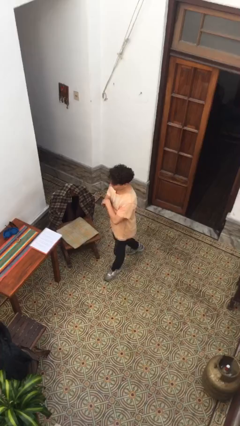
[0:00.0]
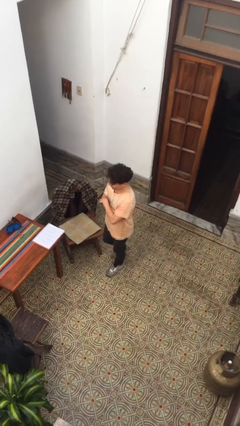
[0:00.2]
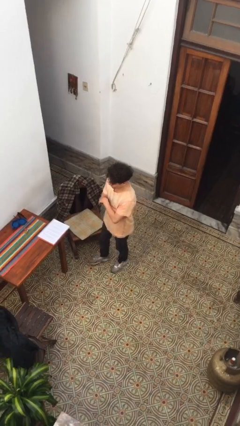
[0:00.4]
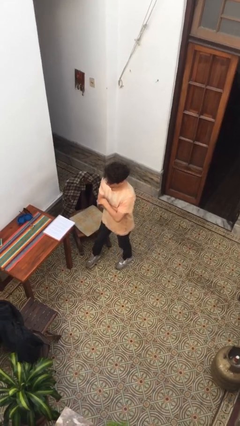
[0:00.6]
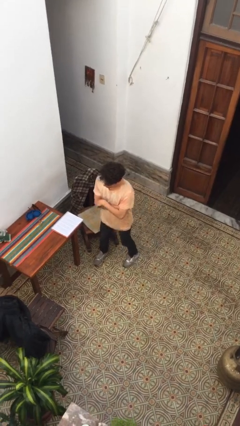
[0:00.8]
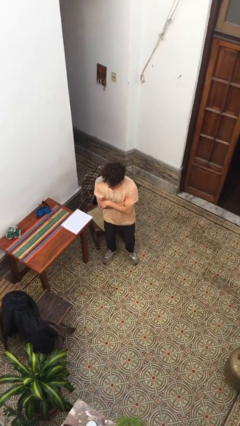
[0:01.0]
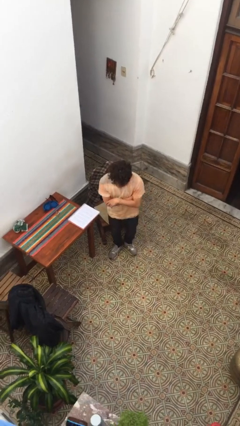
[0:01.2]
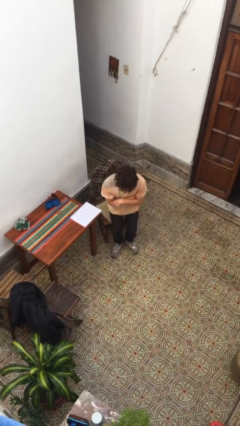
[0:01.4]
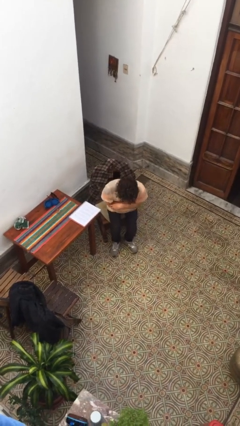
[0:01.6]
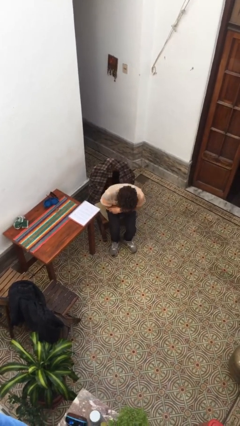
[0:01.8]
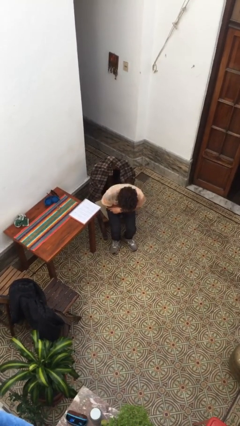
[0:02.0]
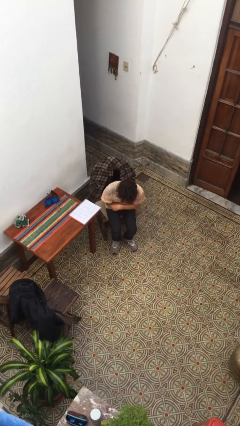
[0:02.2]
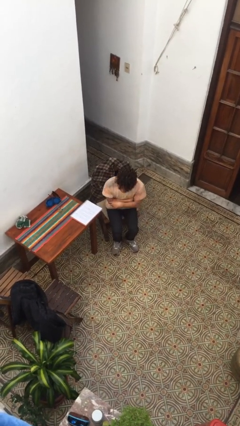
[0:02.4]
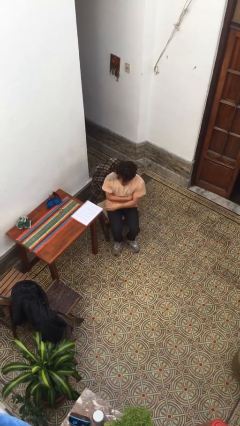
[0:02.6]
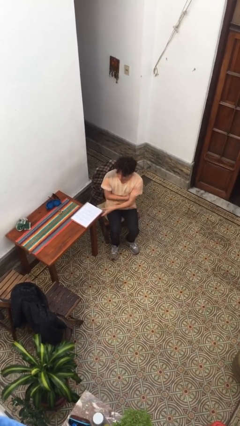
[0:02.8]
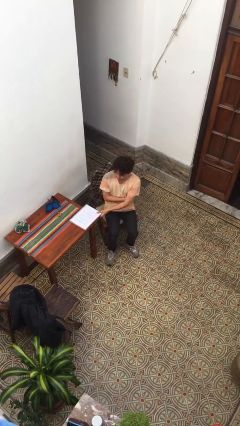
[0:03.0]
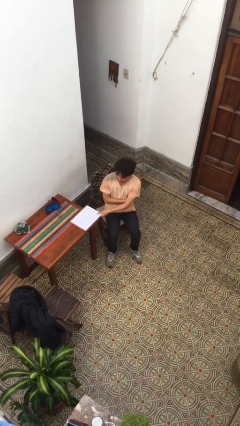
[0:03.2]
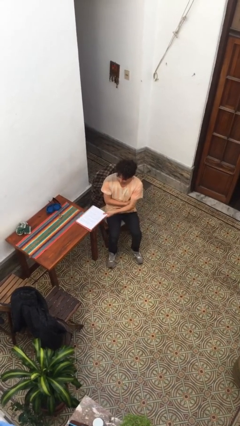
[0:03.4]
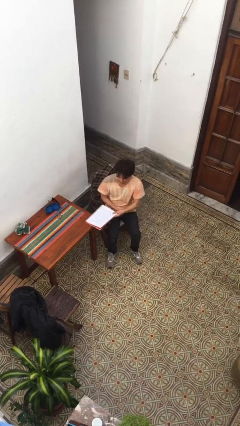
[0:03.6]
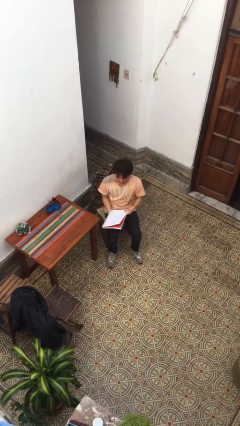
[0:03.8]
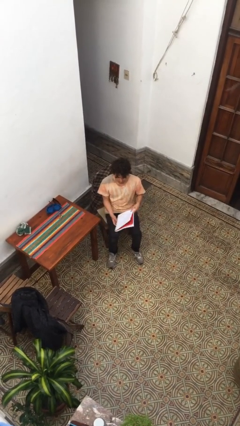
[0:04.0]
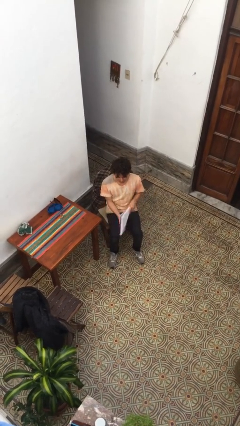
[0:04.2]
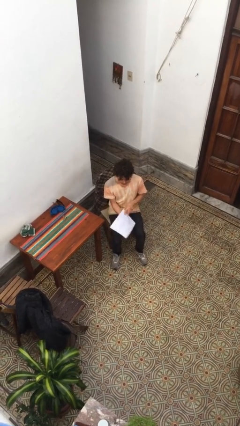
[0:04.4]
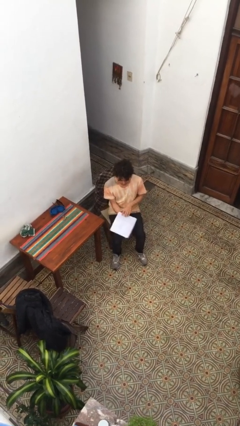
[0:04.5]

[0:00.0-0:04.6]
person sits down

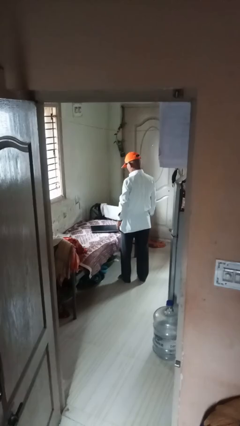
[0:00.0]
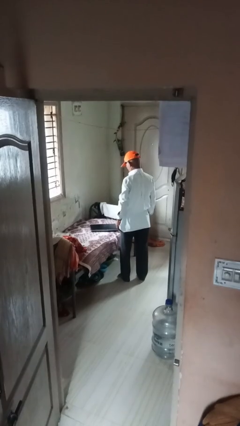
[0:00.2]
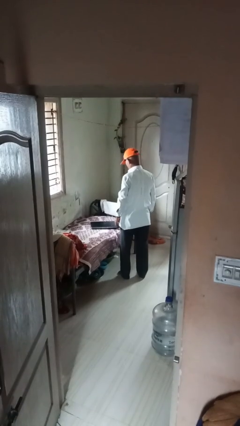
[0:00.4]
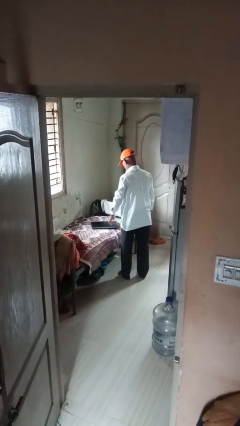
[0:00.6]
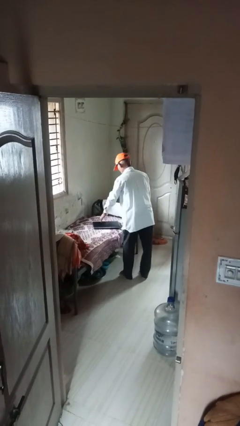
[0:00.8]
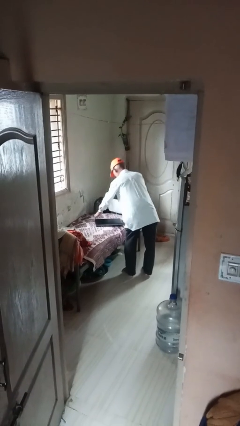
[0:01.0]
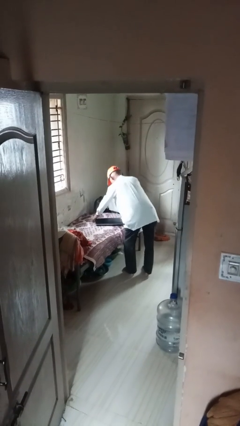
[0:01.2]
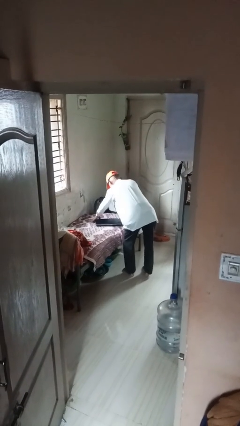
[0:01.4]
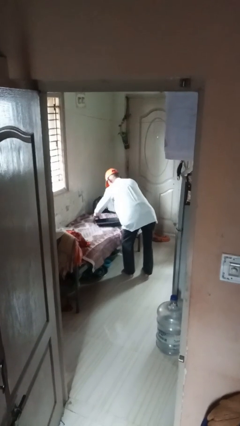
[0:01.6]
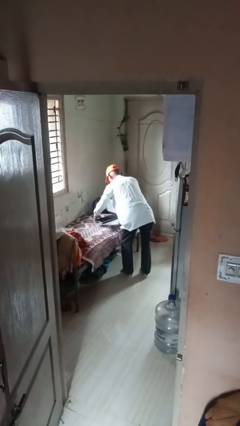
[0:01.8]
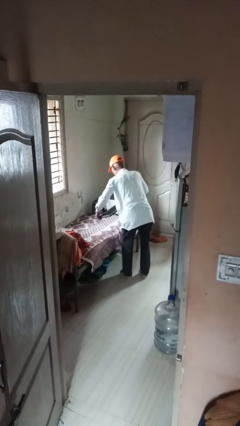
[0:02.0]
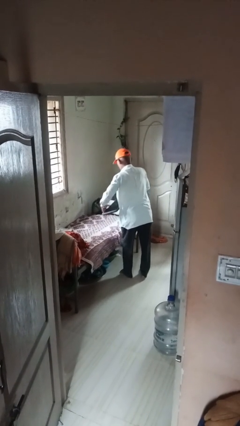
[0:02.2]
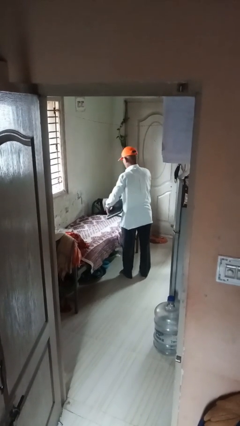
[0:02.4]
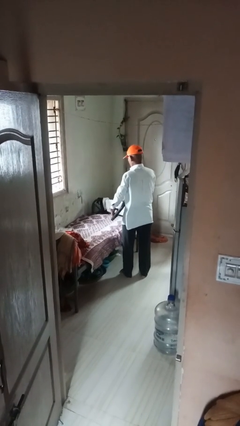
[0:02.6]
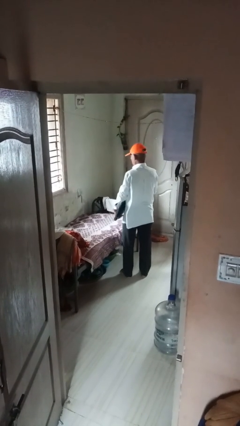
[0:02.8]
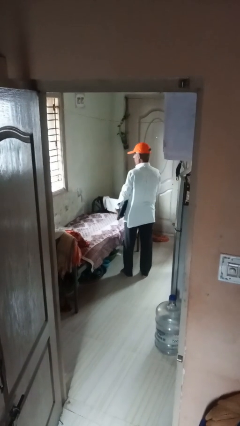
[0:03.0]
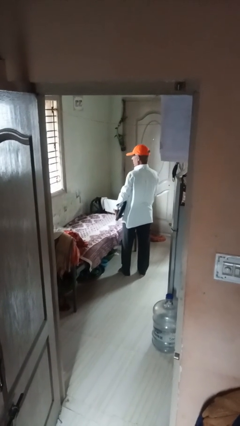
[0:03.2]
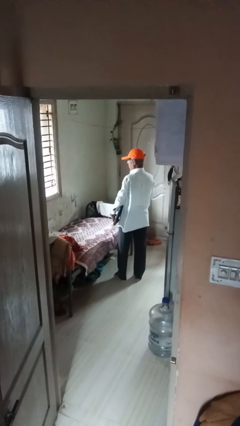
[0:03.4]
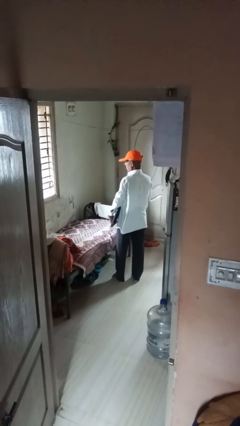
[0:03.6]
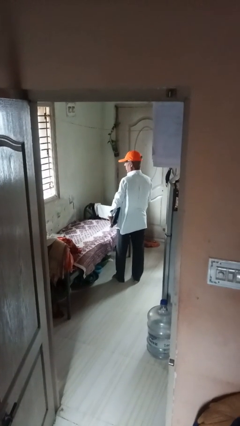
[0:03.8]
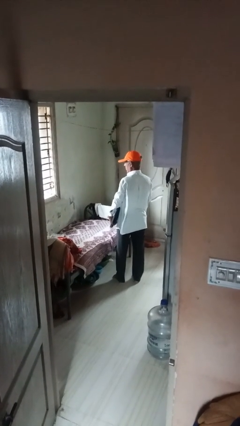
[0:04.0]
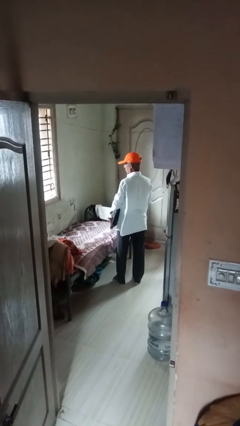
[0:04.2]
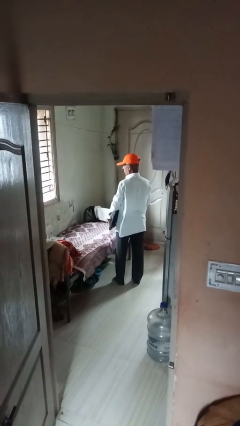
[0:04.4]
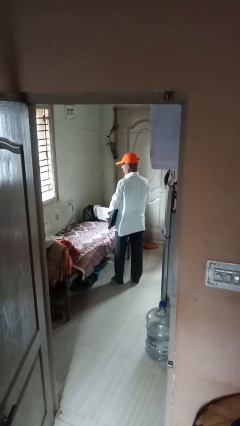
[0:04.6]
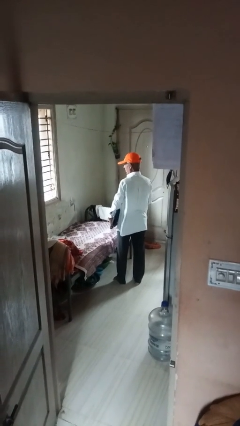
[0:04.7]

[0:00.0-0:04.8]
person picks up object from bed

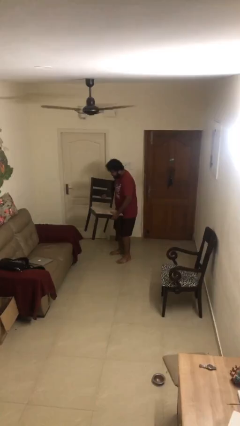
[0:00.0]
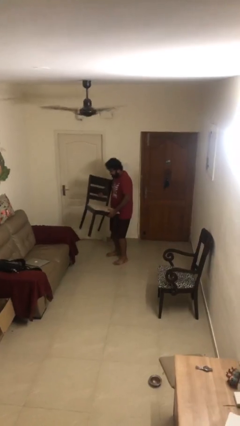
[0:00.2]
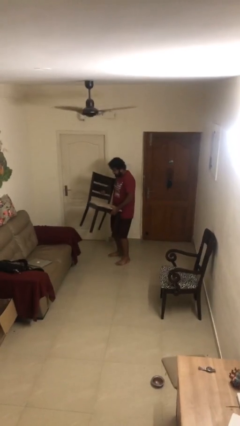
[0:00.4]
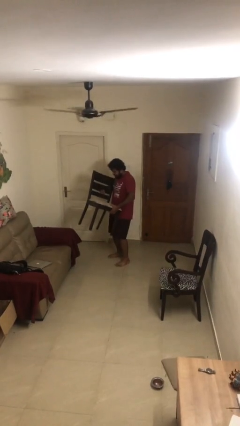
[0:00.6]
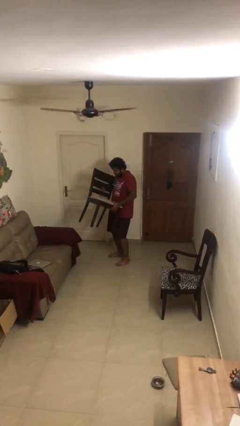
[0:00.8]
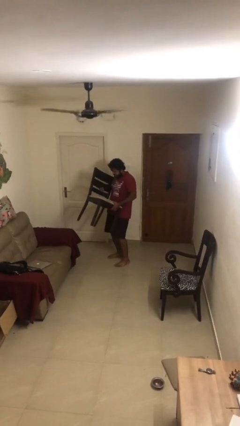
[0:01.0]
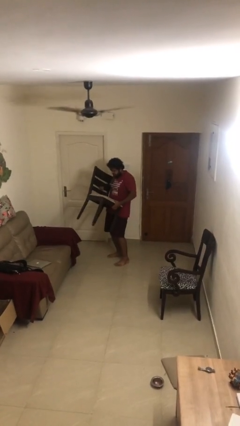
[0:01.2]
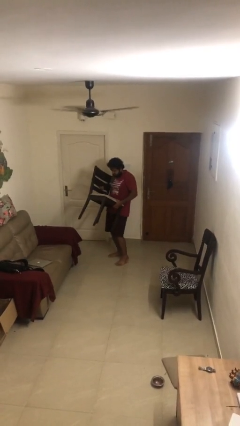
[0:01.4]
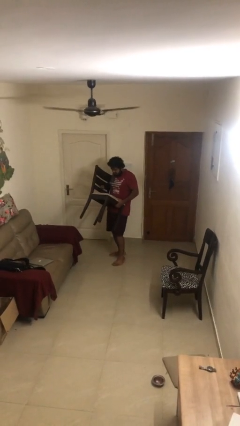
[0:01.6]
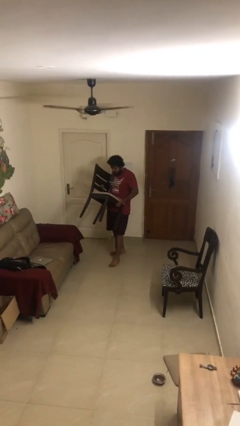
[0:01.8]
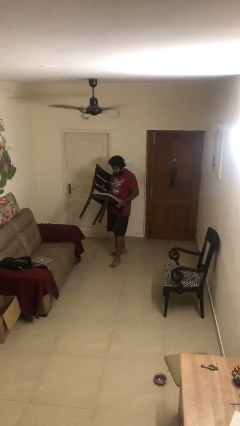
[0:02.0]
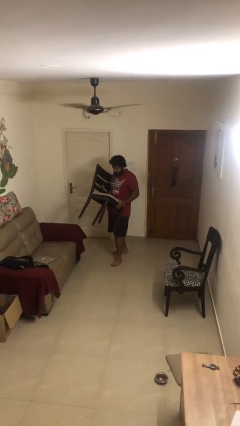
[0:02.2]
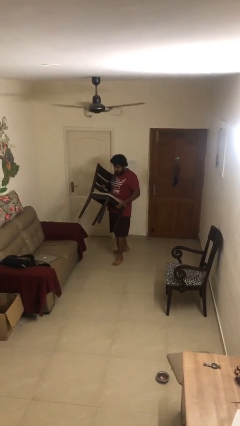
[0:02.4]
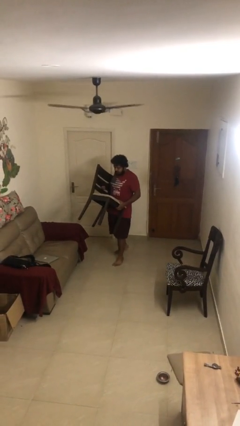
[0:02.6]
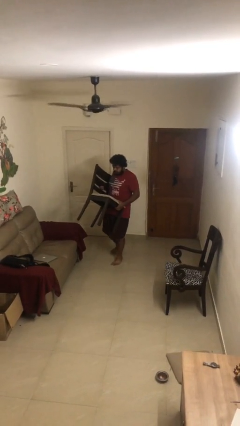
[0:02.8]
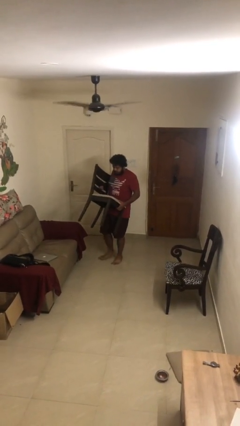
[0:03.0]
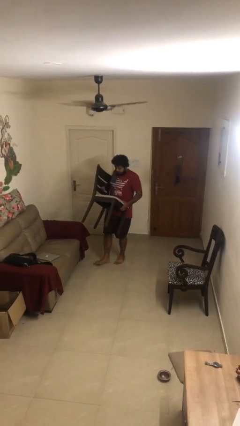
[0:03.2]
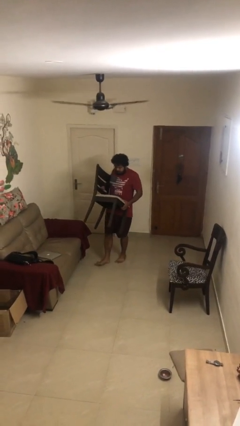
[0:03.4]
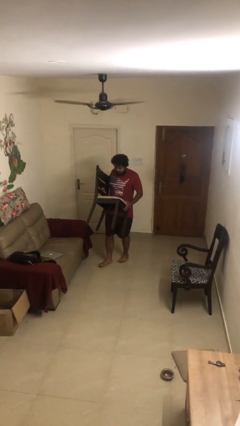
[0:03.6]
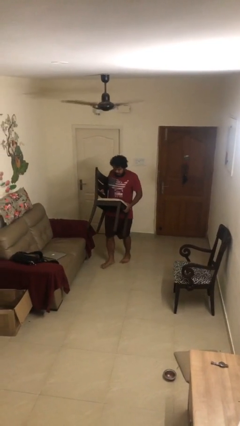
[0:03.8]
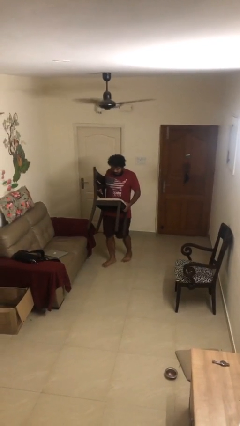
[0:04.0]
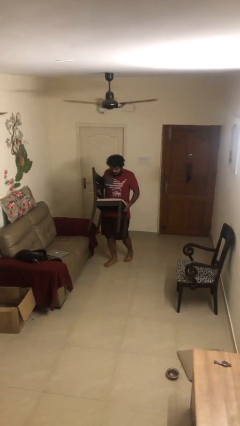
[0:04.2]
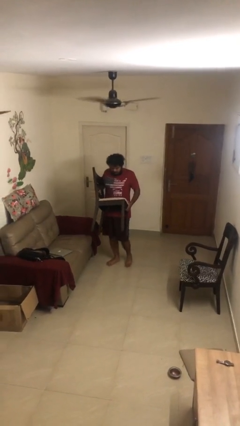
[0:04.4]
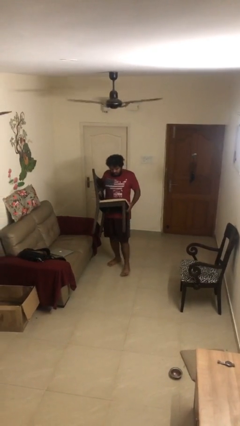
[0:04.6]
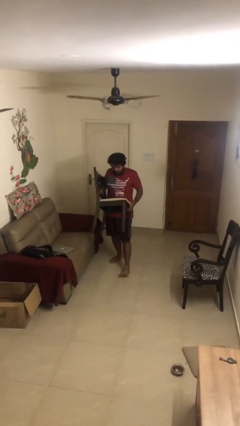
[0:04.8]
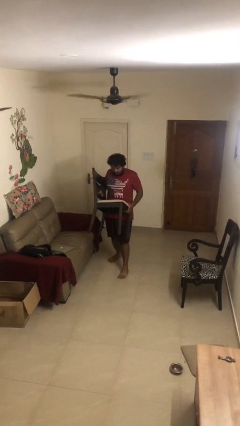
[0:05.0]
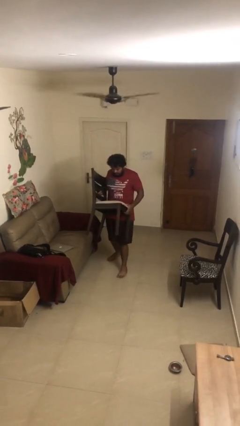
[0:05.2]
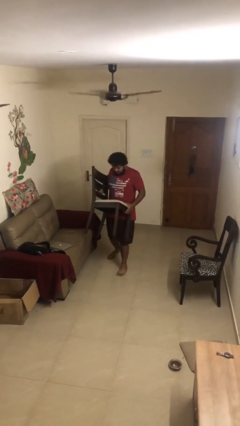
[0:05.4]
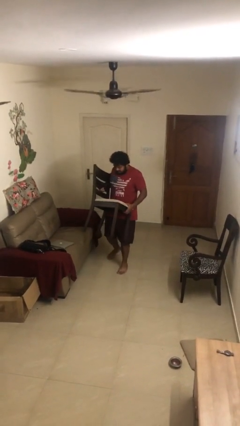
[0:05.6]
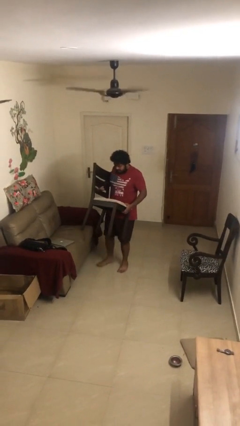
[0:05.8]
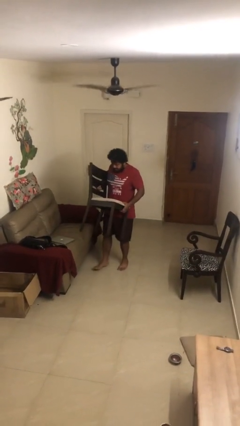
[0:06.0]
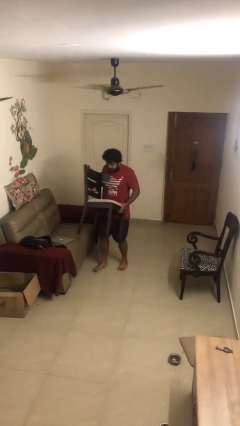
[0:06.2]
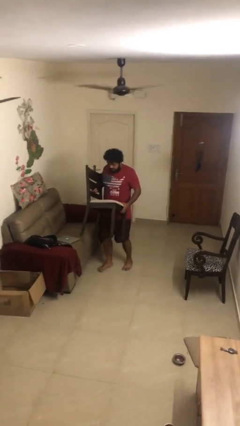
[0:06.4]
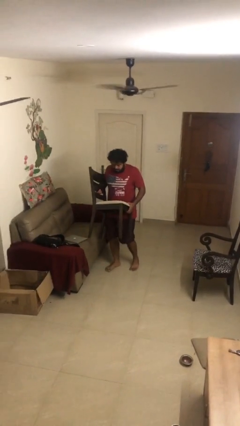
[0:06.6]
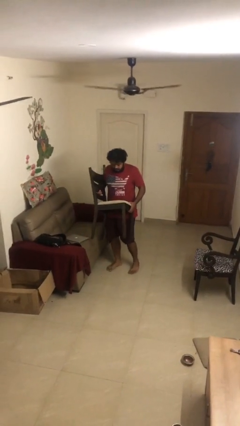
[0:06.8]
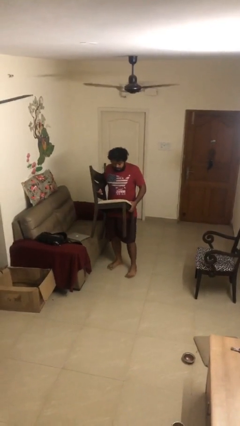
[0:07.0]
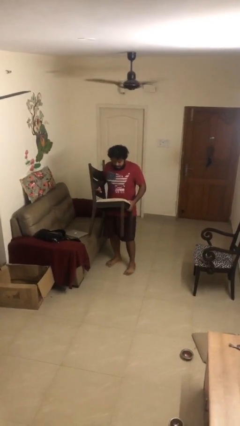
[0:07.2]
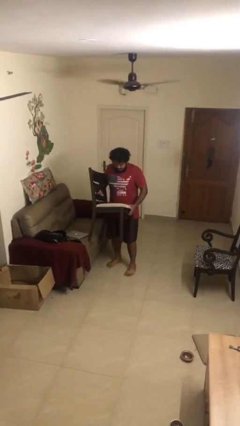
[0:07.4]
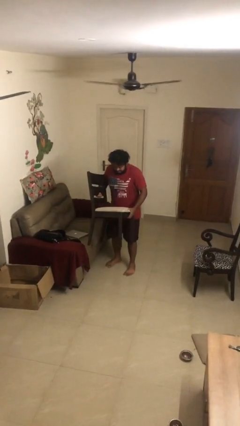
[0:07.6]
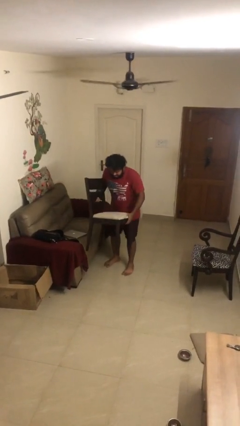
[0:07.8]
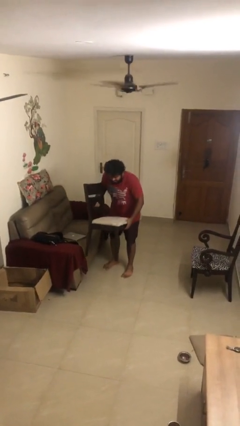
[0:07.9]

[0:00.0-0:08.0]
person carries heavy object

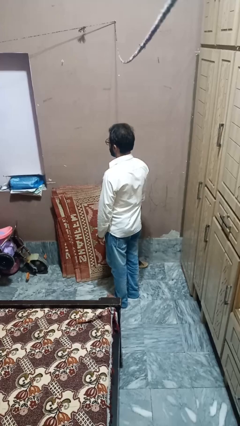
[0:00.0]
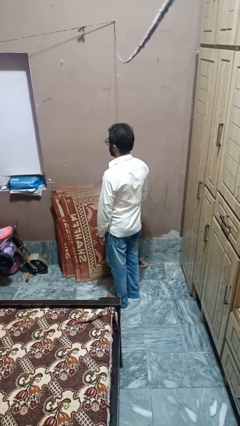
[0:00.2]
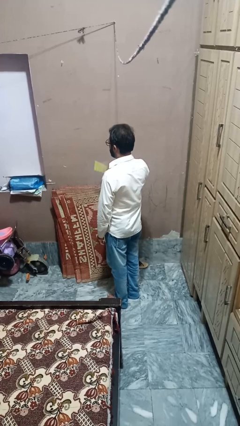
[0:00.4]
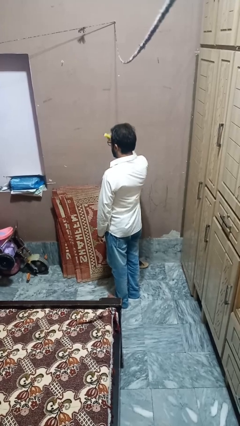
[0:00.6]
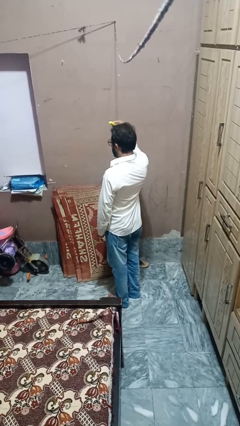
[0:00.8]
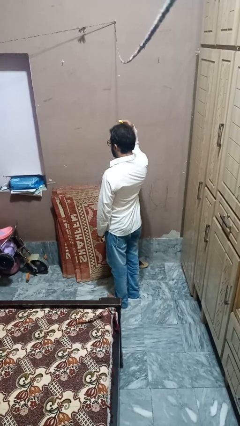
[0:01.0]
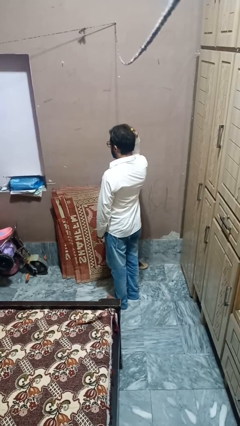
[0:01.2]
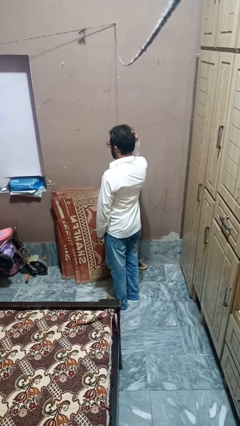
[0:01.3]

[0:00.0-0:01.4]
person brushes hair
